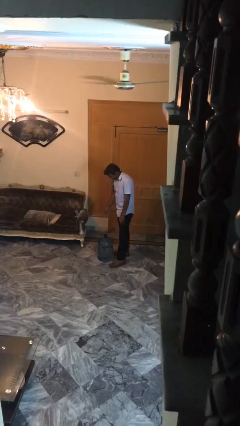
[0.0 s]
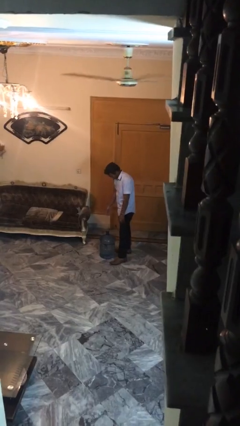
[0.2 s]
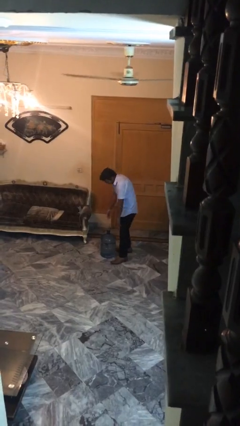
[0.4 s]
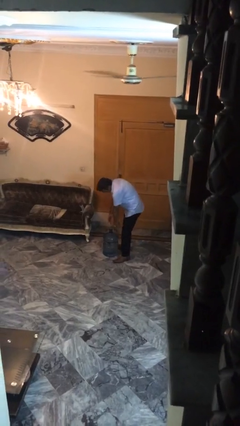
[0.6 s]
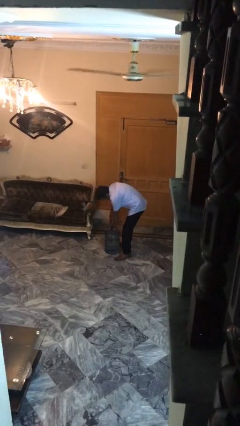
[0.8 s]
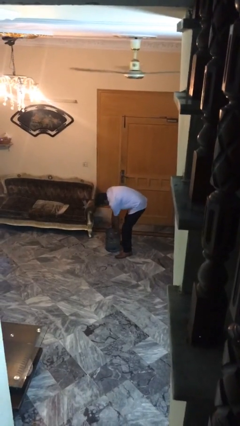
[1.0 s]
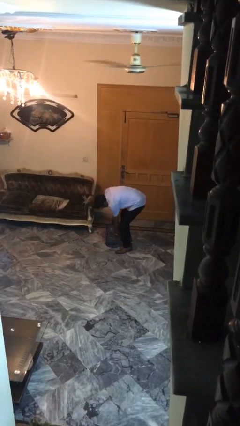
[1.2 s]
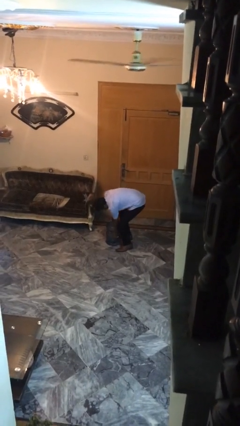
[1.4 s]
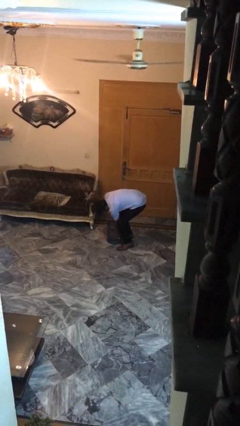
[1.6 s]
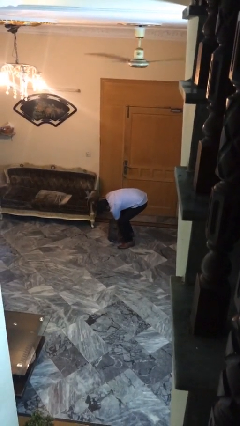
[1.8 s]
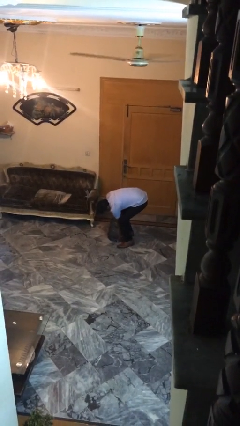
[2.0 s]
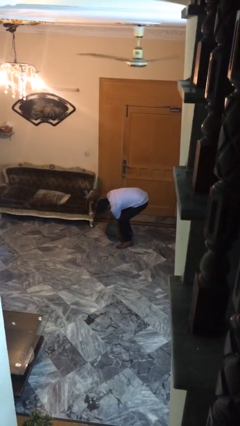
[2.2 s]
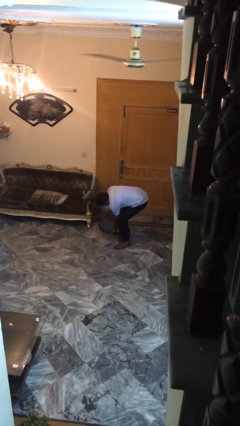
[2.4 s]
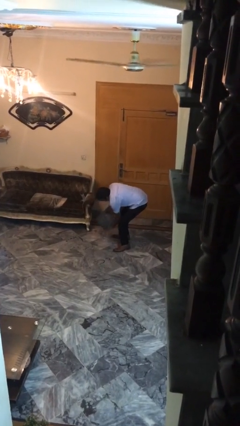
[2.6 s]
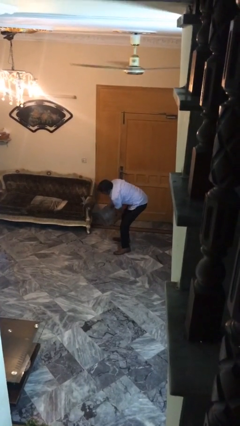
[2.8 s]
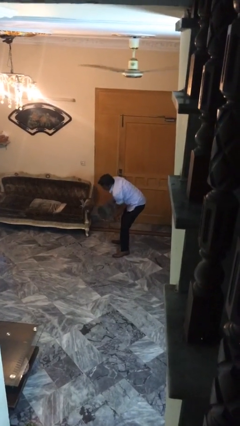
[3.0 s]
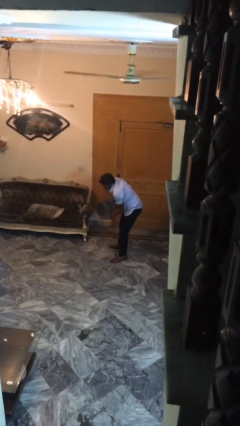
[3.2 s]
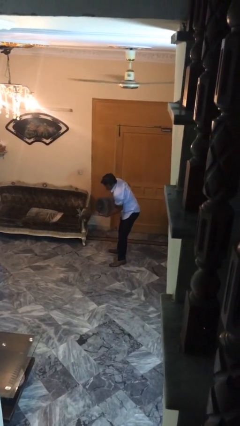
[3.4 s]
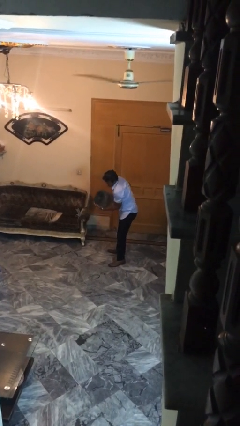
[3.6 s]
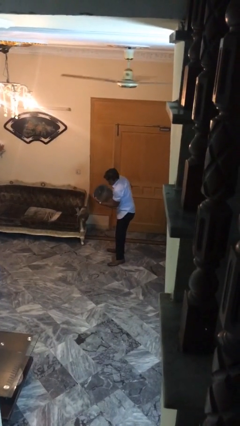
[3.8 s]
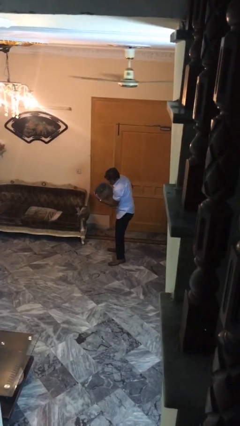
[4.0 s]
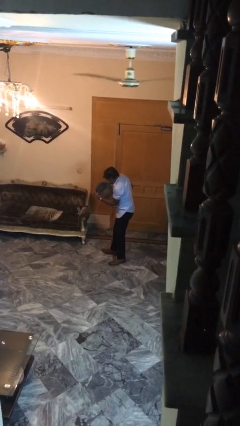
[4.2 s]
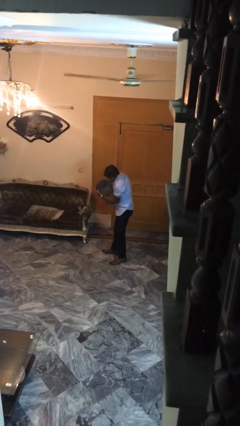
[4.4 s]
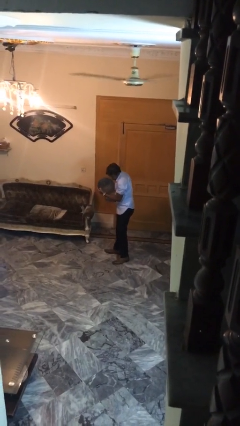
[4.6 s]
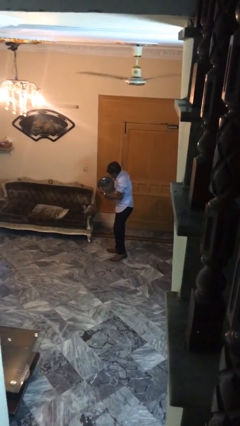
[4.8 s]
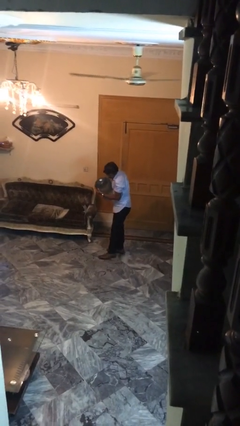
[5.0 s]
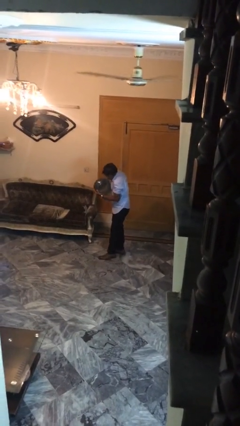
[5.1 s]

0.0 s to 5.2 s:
person picks up object from floor

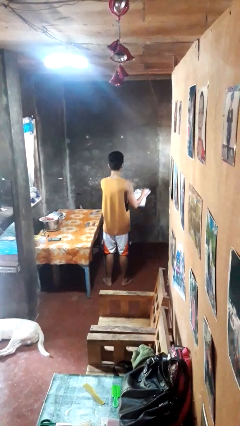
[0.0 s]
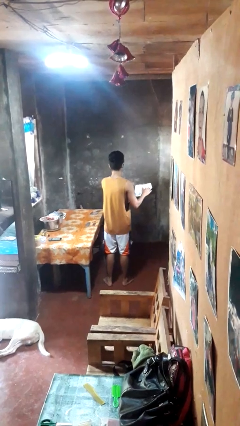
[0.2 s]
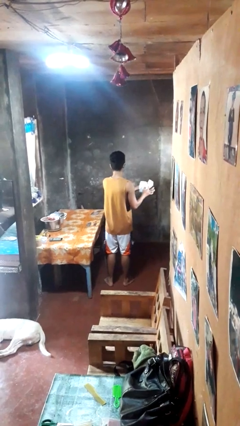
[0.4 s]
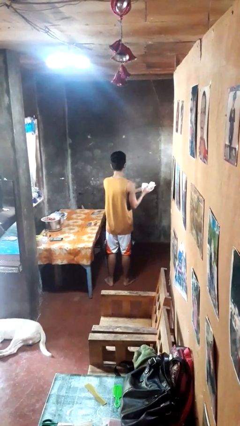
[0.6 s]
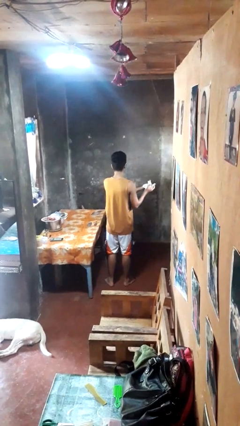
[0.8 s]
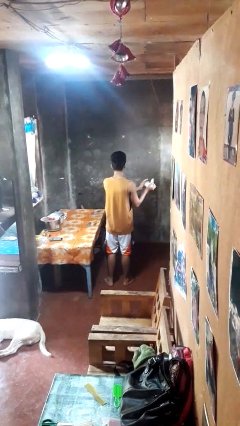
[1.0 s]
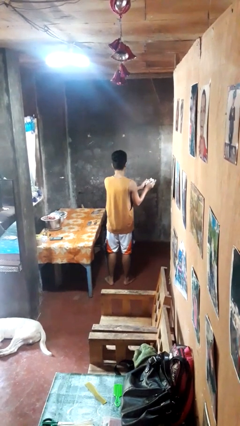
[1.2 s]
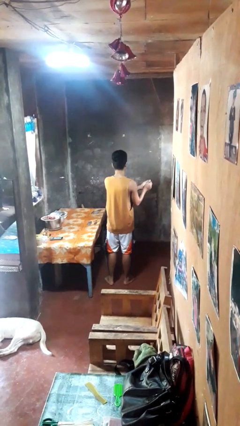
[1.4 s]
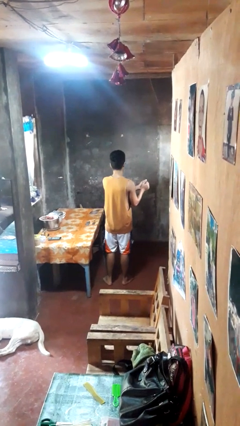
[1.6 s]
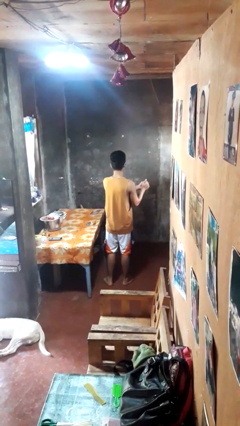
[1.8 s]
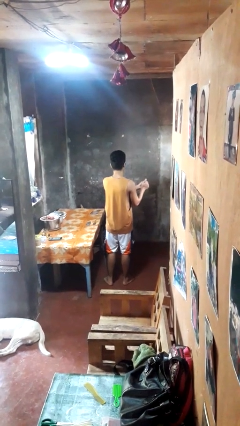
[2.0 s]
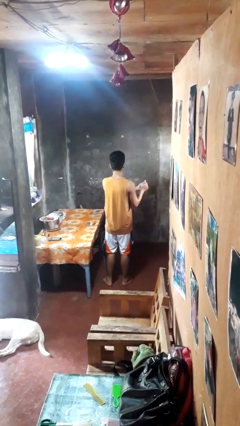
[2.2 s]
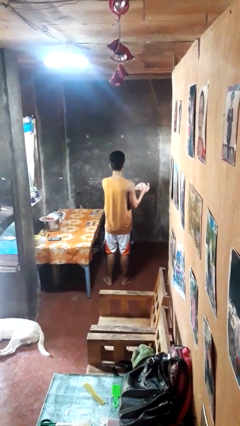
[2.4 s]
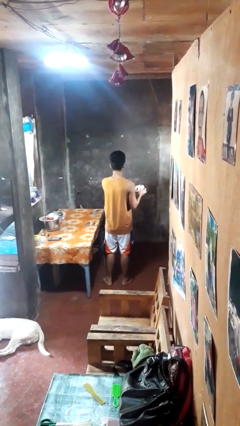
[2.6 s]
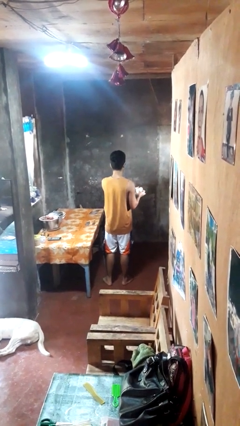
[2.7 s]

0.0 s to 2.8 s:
person crumples paper

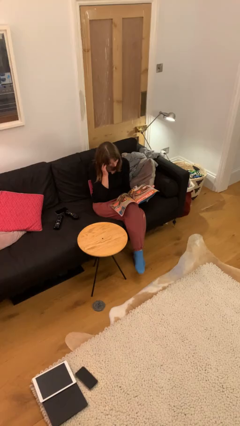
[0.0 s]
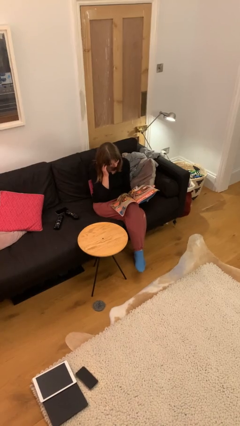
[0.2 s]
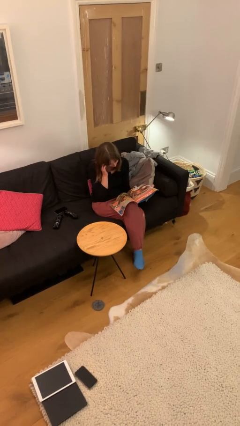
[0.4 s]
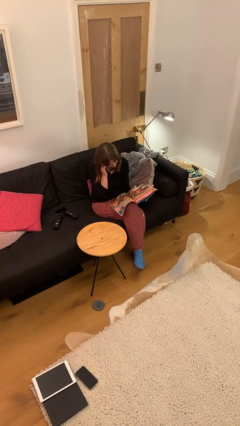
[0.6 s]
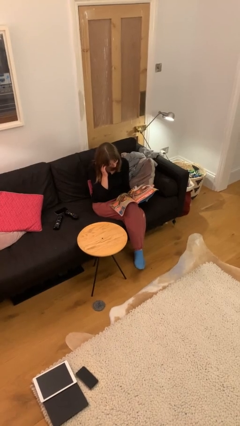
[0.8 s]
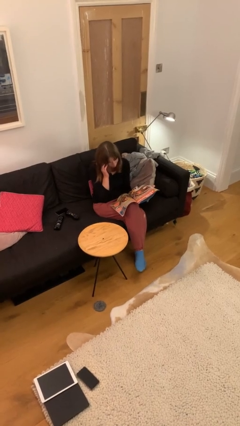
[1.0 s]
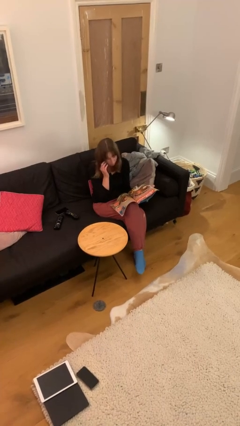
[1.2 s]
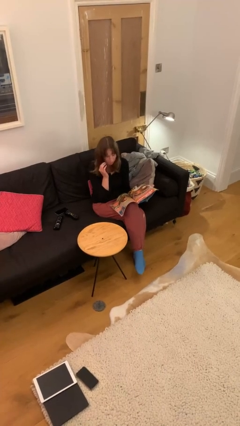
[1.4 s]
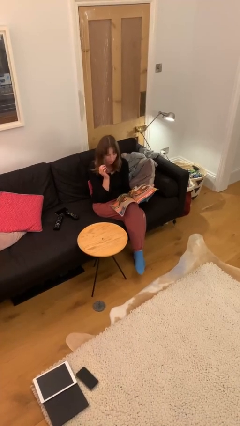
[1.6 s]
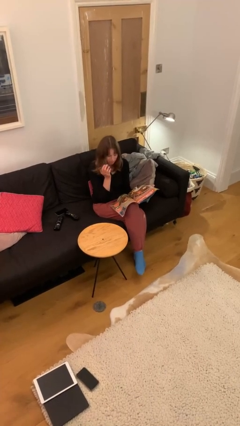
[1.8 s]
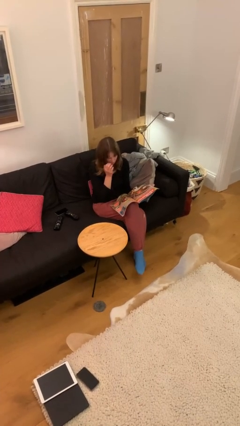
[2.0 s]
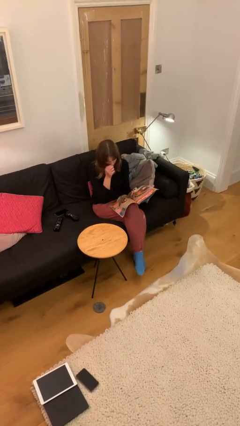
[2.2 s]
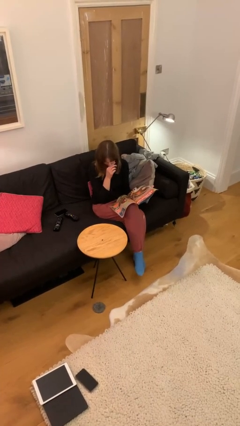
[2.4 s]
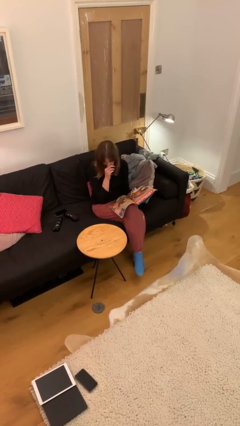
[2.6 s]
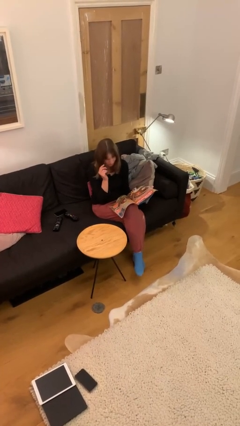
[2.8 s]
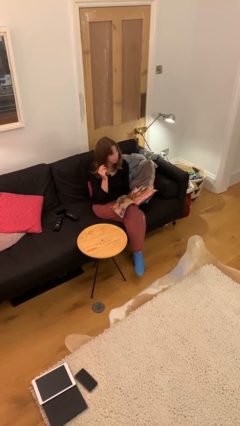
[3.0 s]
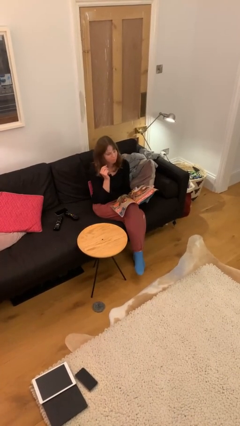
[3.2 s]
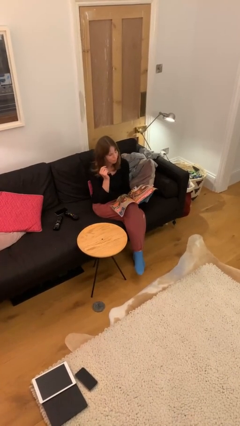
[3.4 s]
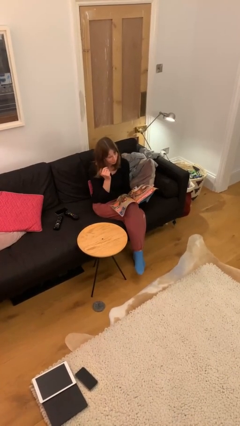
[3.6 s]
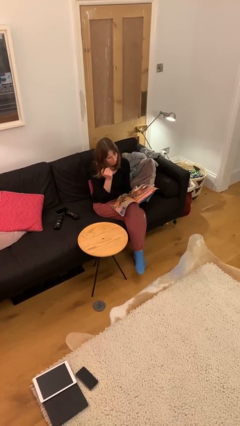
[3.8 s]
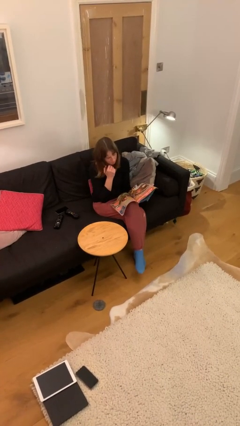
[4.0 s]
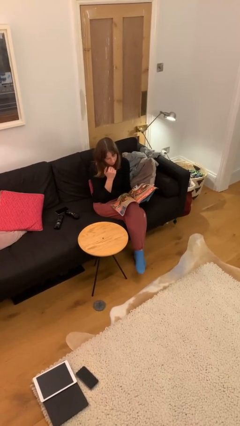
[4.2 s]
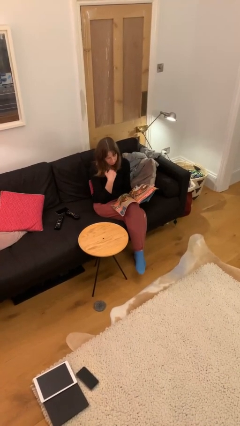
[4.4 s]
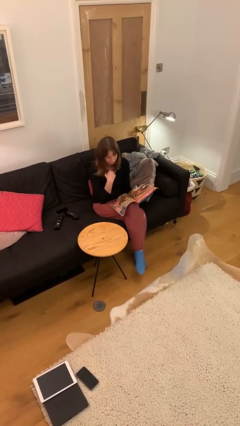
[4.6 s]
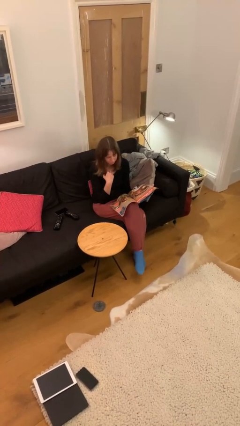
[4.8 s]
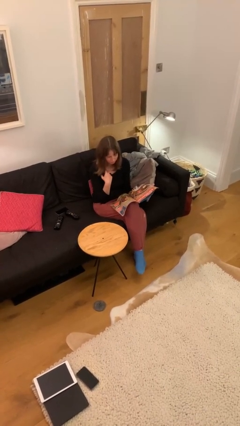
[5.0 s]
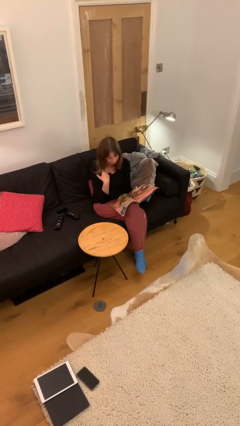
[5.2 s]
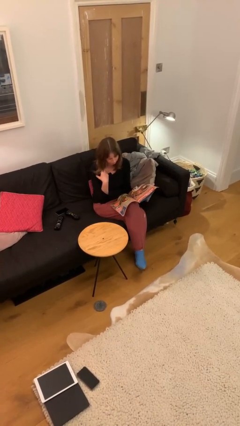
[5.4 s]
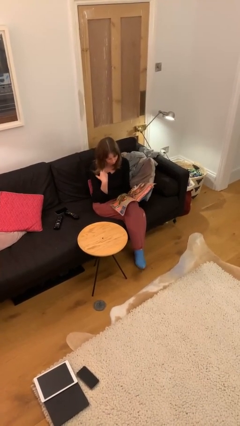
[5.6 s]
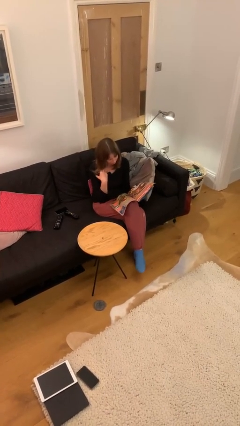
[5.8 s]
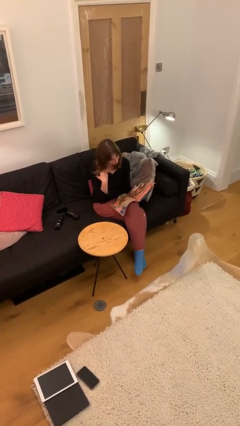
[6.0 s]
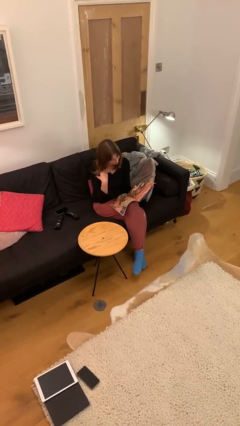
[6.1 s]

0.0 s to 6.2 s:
person reads document

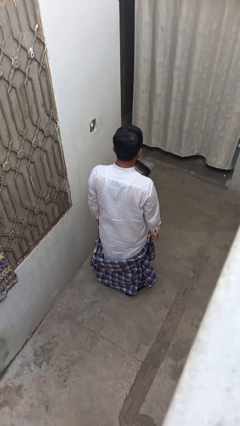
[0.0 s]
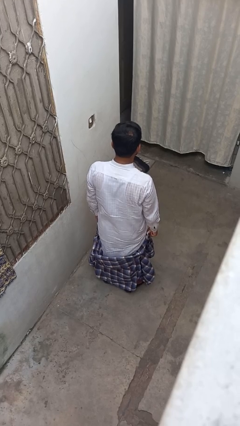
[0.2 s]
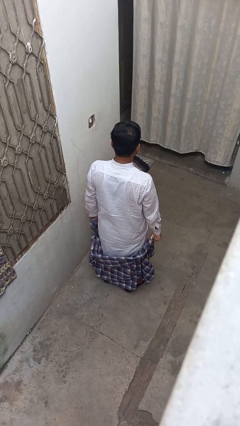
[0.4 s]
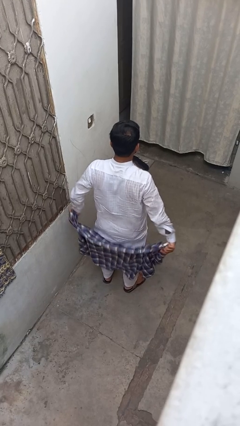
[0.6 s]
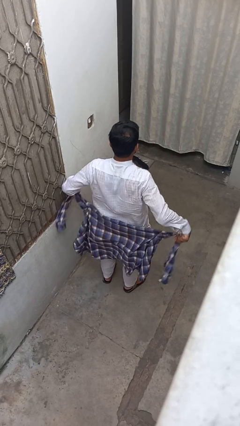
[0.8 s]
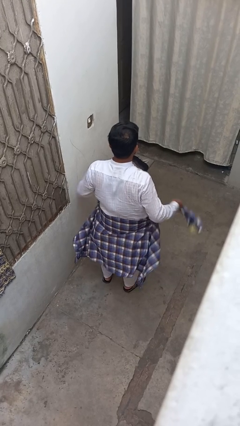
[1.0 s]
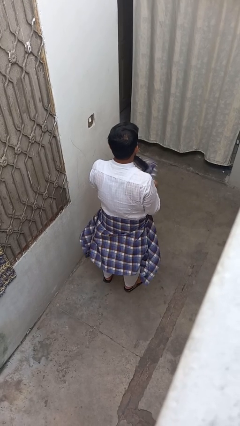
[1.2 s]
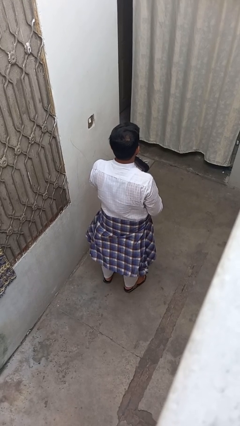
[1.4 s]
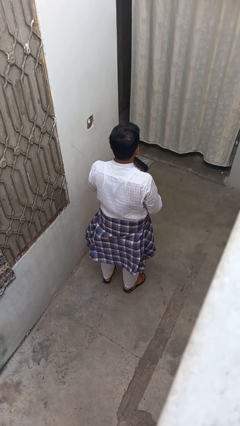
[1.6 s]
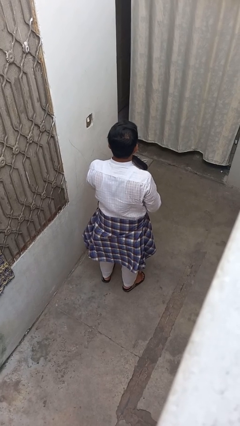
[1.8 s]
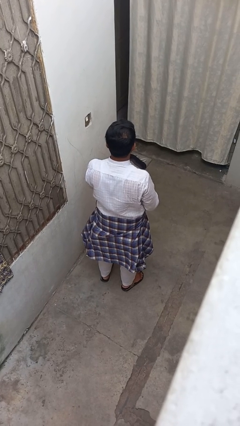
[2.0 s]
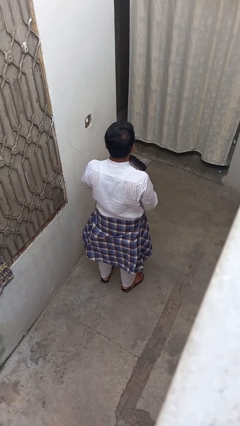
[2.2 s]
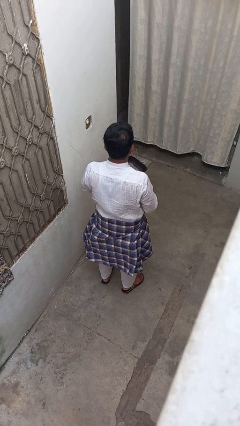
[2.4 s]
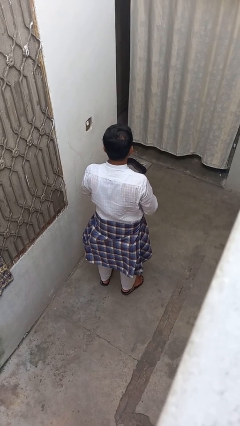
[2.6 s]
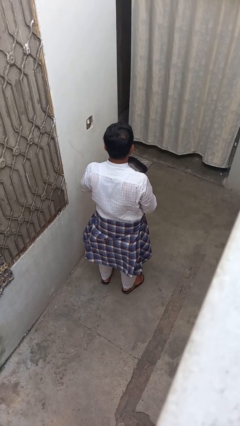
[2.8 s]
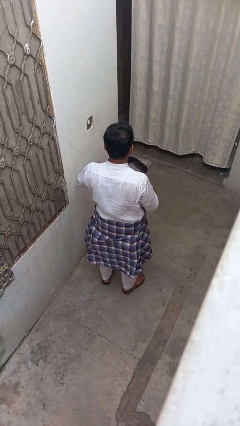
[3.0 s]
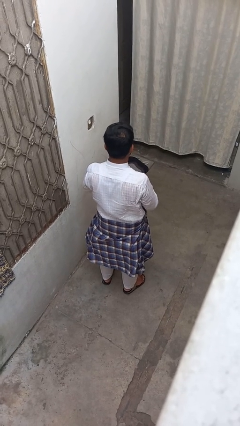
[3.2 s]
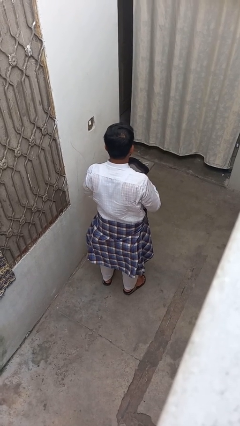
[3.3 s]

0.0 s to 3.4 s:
person ties jacket around waist
